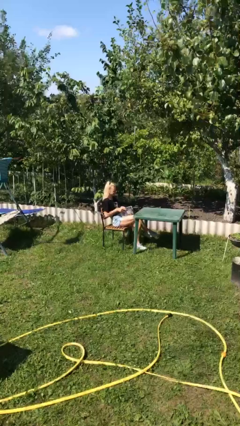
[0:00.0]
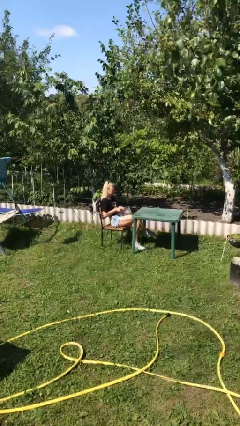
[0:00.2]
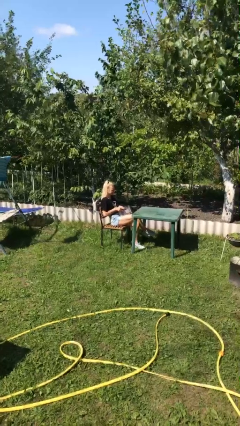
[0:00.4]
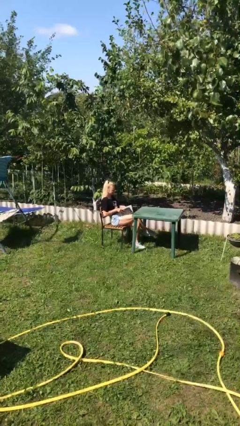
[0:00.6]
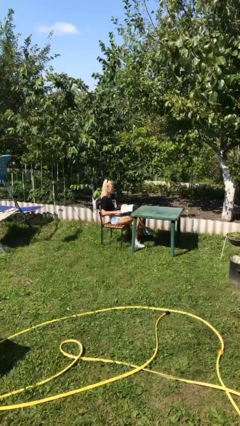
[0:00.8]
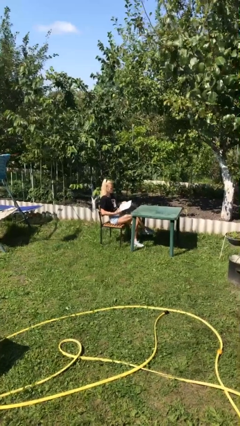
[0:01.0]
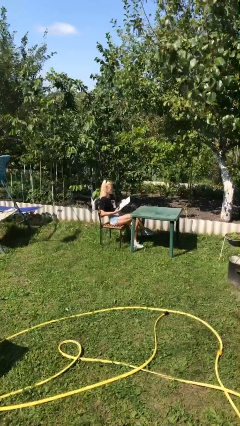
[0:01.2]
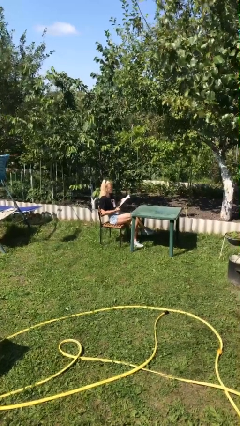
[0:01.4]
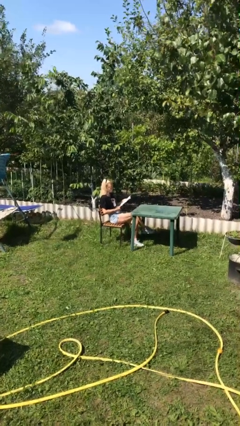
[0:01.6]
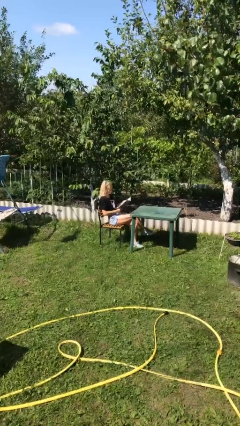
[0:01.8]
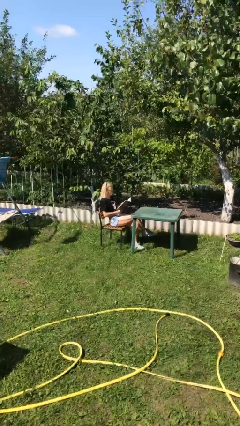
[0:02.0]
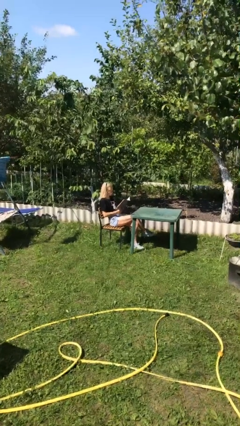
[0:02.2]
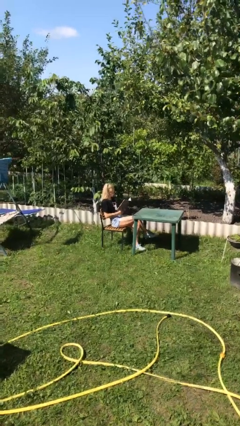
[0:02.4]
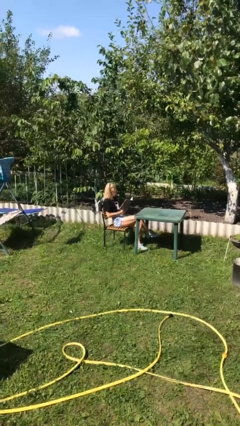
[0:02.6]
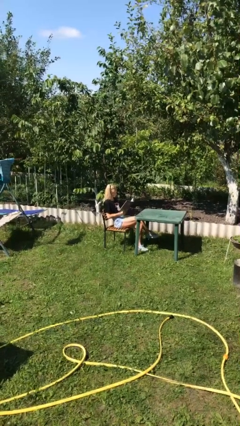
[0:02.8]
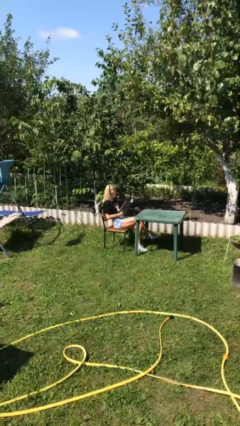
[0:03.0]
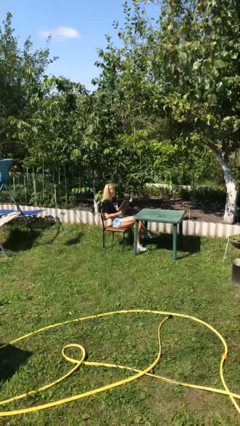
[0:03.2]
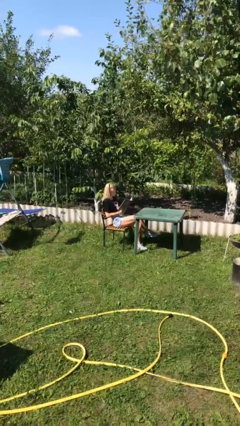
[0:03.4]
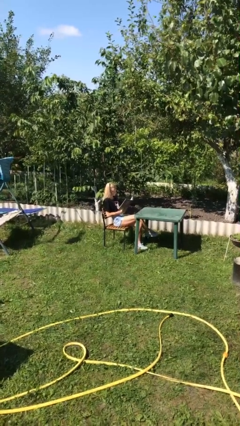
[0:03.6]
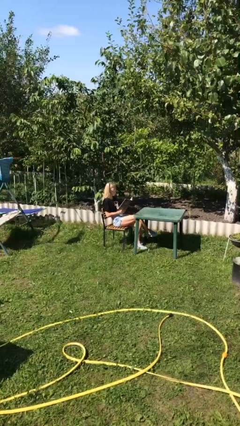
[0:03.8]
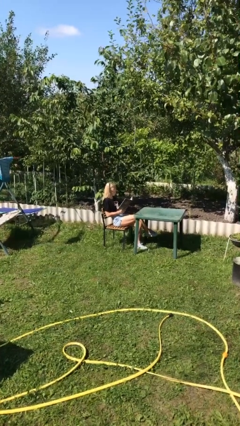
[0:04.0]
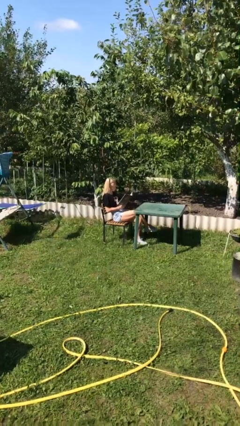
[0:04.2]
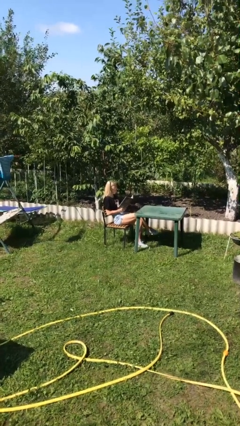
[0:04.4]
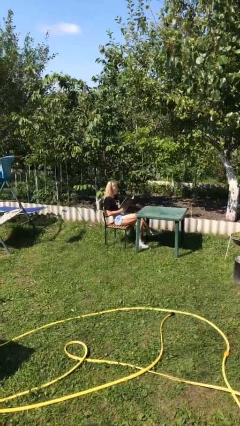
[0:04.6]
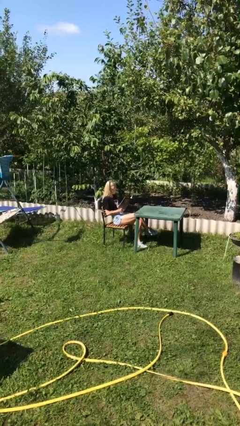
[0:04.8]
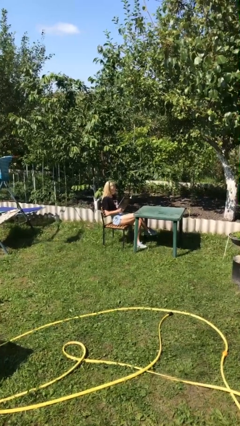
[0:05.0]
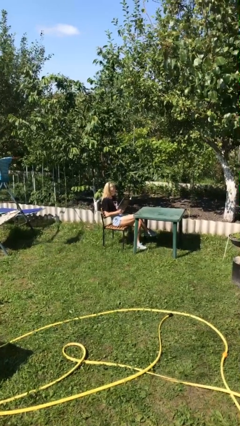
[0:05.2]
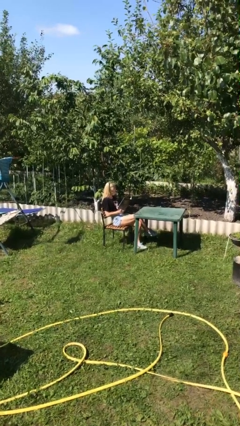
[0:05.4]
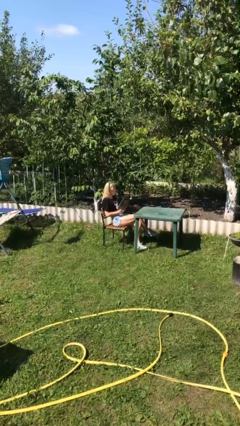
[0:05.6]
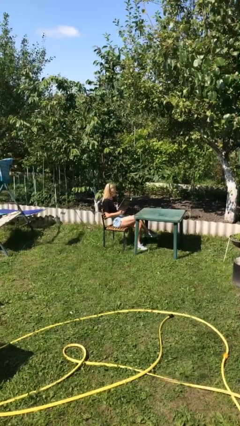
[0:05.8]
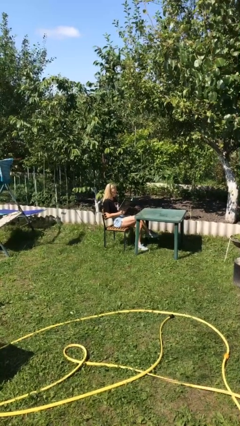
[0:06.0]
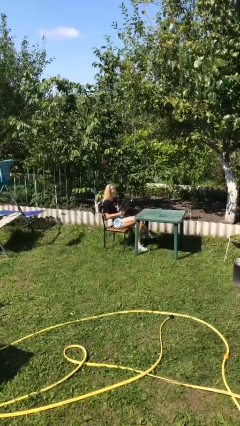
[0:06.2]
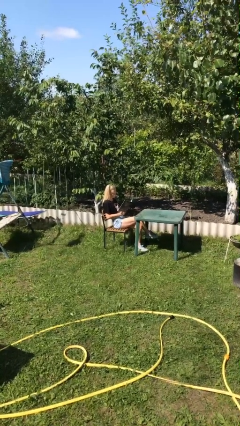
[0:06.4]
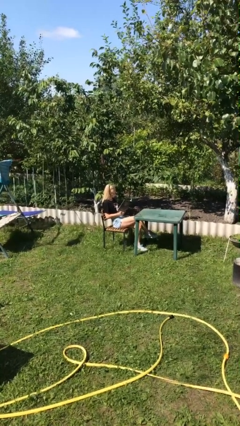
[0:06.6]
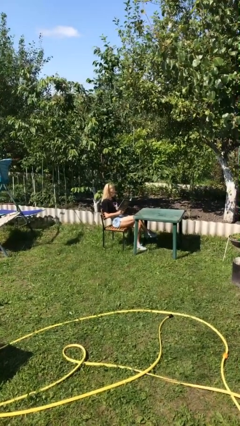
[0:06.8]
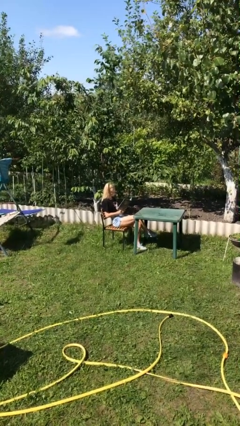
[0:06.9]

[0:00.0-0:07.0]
person reads document

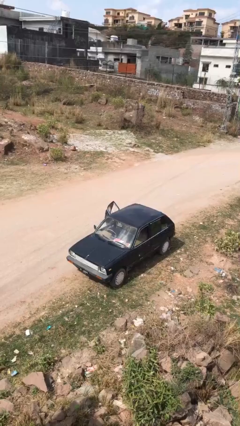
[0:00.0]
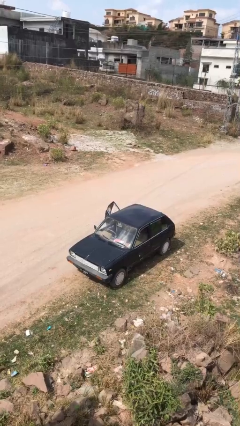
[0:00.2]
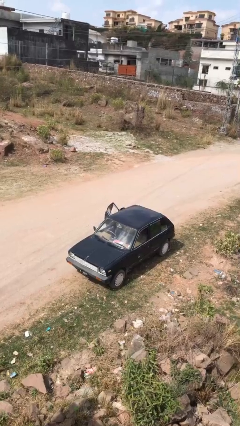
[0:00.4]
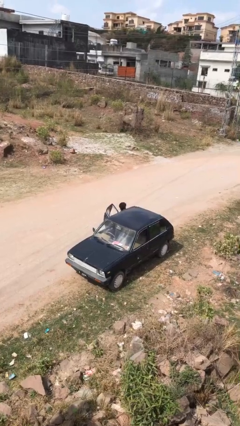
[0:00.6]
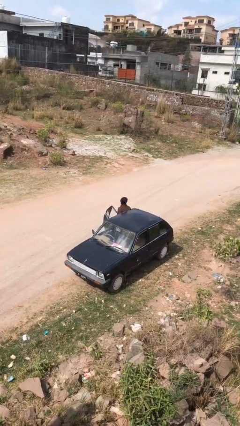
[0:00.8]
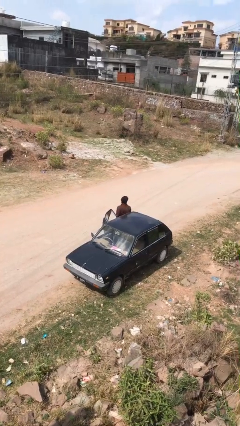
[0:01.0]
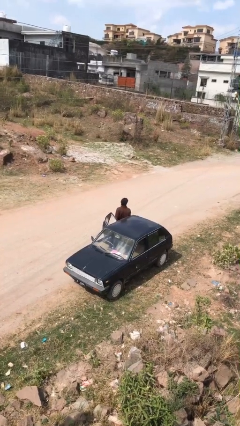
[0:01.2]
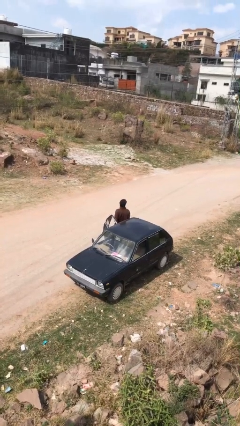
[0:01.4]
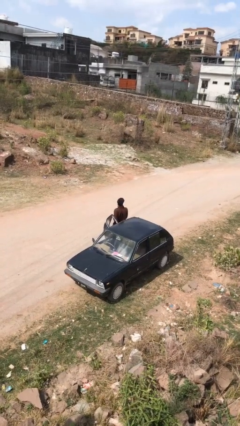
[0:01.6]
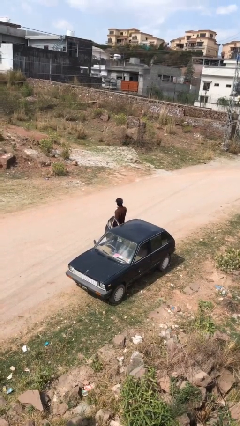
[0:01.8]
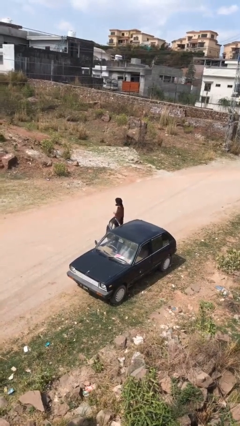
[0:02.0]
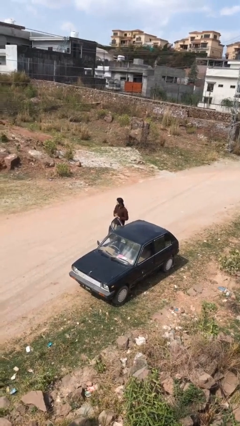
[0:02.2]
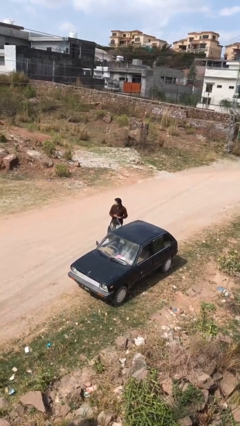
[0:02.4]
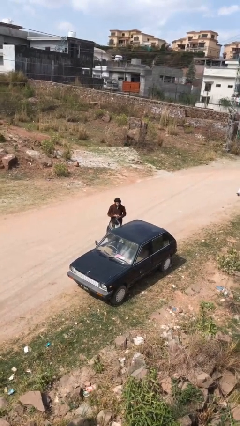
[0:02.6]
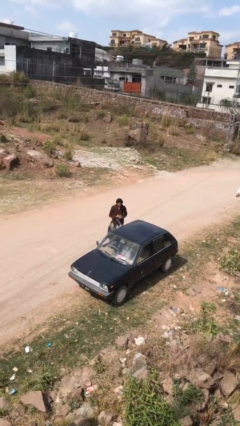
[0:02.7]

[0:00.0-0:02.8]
person exits car

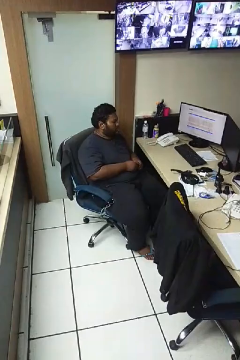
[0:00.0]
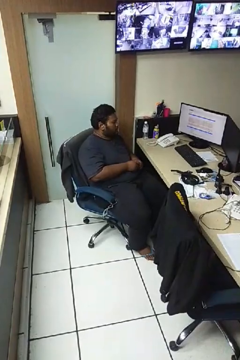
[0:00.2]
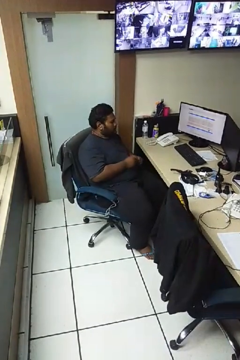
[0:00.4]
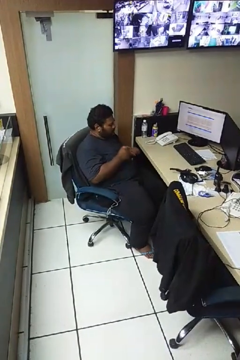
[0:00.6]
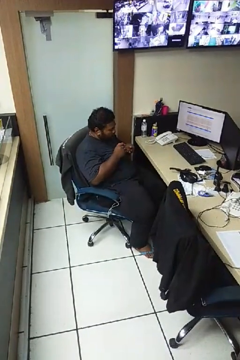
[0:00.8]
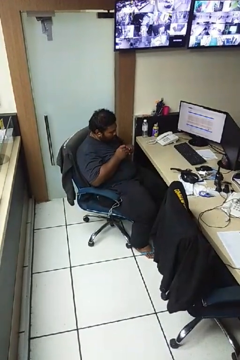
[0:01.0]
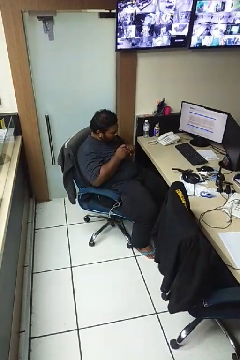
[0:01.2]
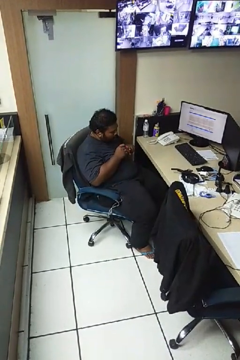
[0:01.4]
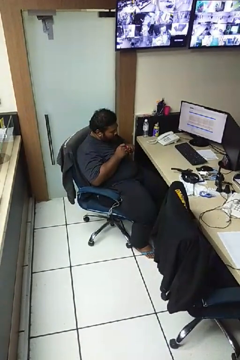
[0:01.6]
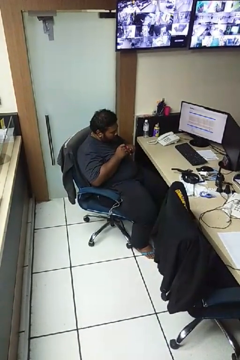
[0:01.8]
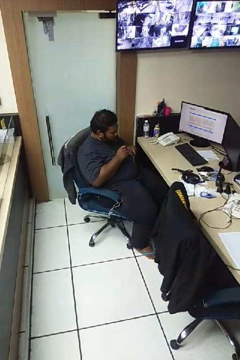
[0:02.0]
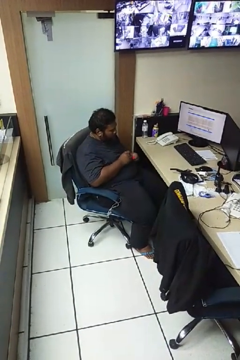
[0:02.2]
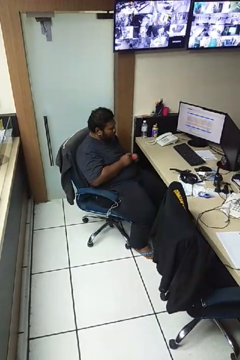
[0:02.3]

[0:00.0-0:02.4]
person paints fingernails

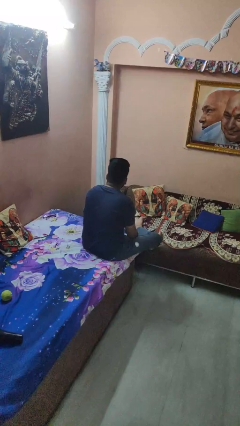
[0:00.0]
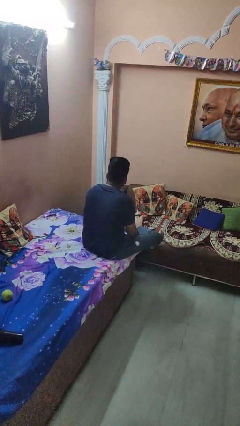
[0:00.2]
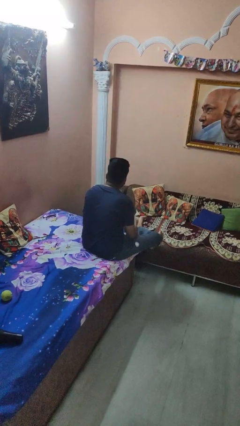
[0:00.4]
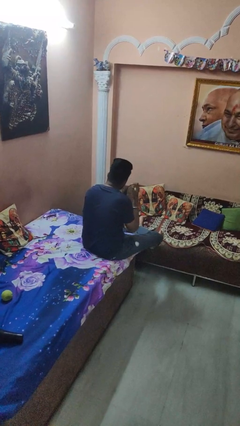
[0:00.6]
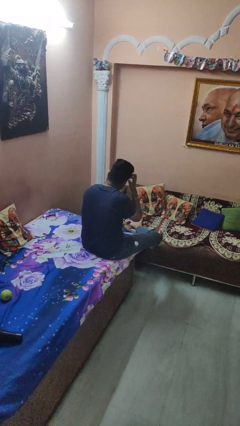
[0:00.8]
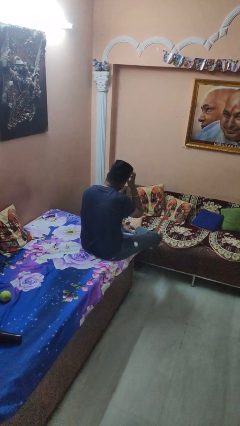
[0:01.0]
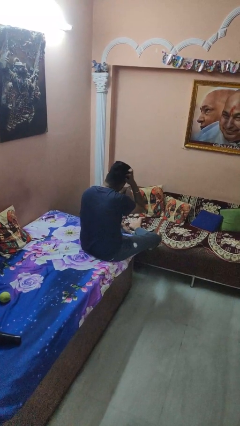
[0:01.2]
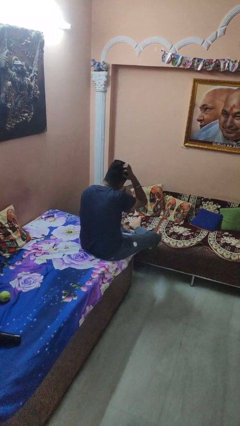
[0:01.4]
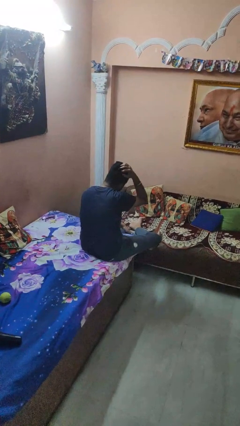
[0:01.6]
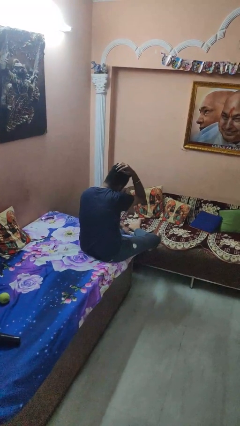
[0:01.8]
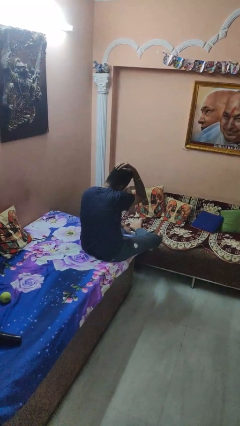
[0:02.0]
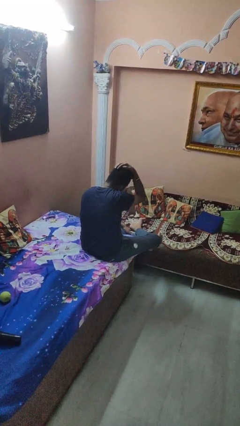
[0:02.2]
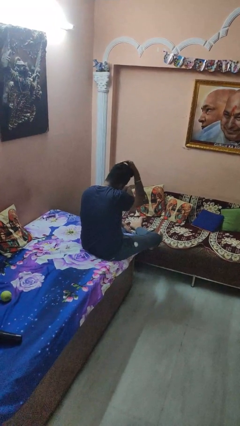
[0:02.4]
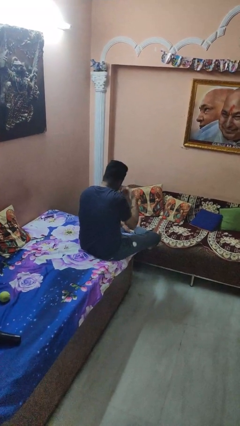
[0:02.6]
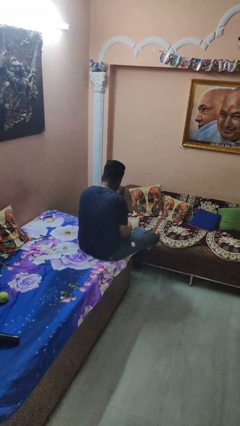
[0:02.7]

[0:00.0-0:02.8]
person strokes hair

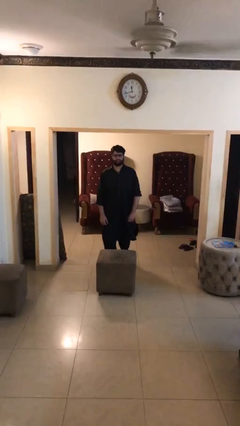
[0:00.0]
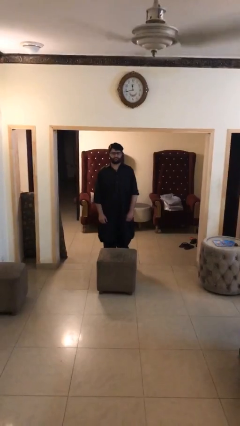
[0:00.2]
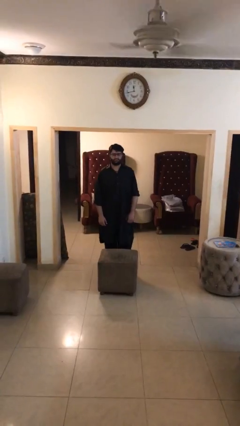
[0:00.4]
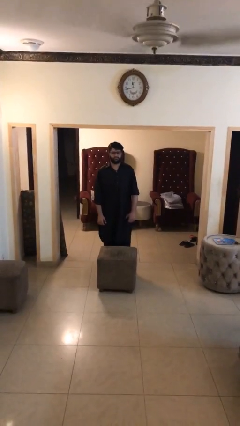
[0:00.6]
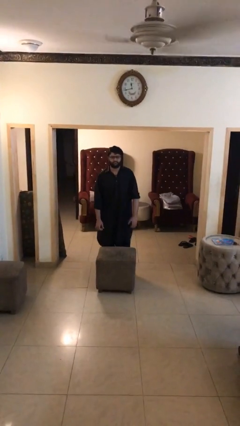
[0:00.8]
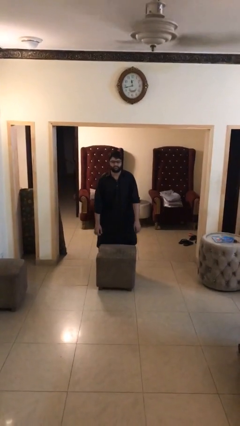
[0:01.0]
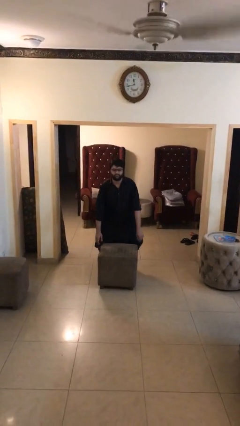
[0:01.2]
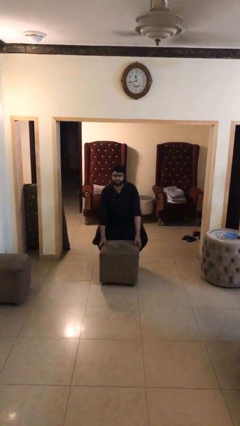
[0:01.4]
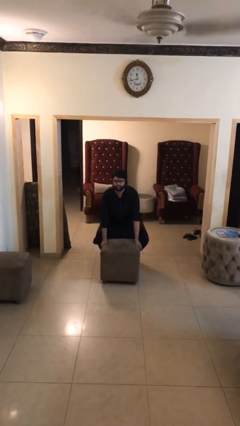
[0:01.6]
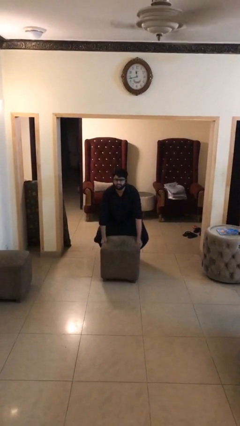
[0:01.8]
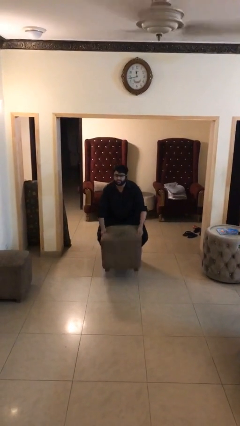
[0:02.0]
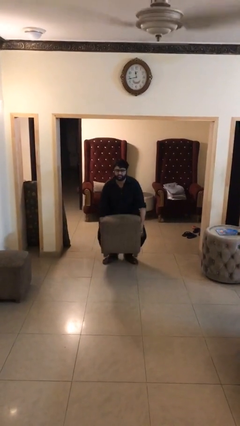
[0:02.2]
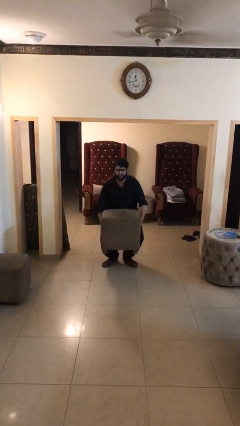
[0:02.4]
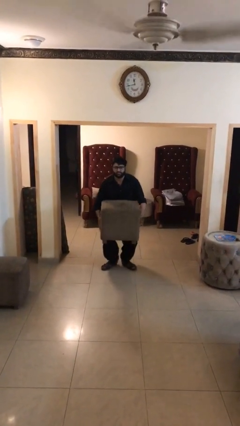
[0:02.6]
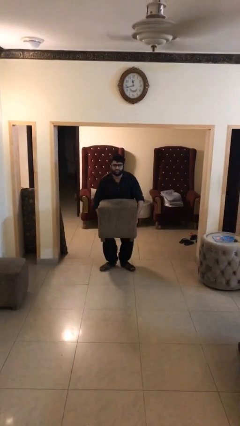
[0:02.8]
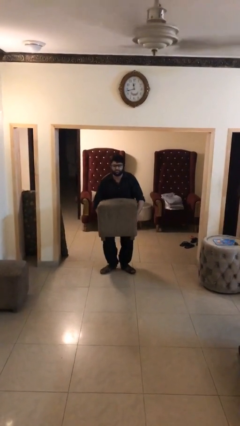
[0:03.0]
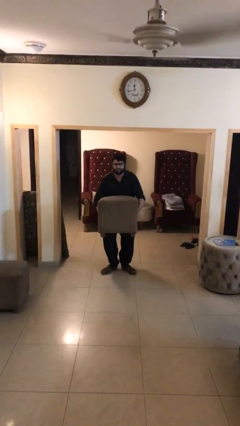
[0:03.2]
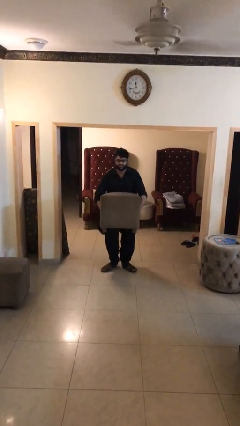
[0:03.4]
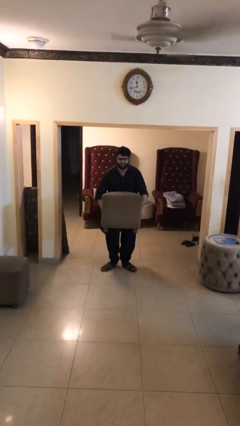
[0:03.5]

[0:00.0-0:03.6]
person picks up object from floor
